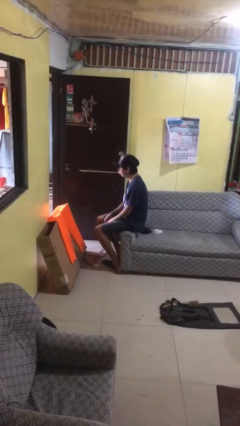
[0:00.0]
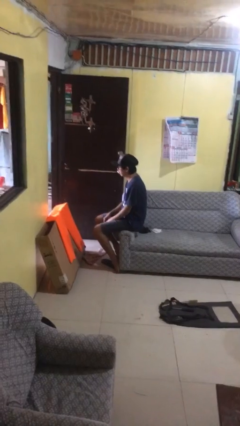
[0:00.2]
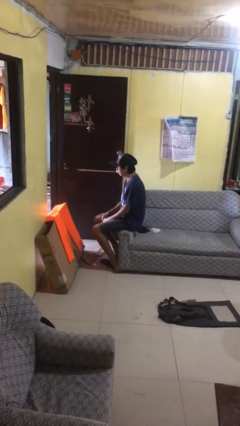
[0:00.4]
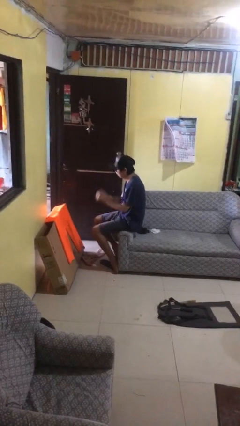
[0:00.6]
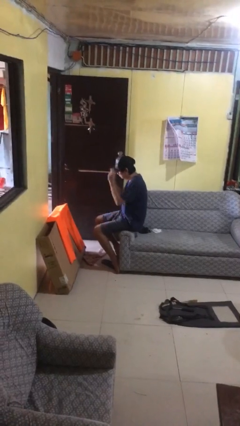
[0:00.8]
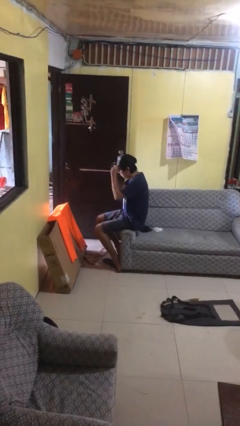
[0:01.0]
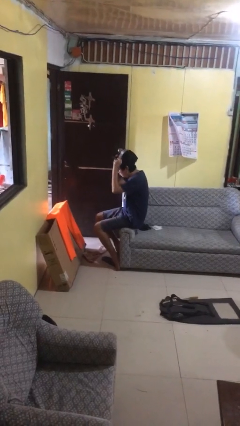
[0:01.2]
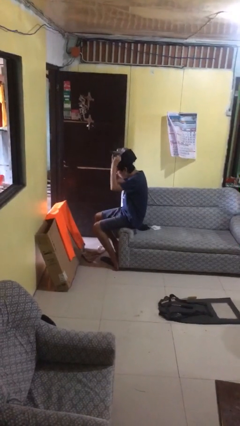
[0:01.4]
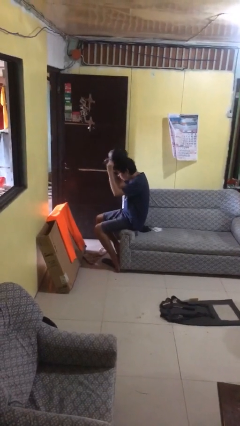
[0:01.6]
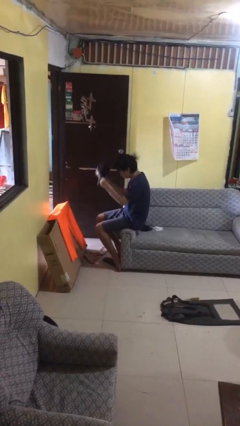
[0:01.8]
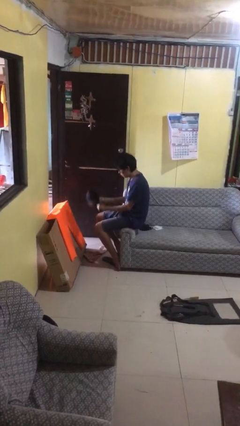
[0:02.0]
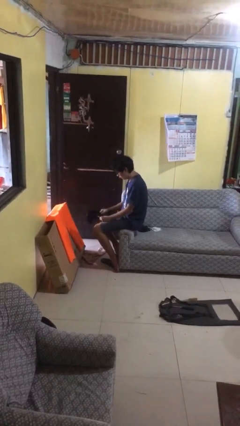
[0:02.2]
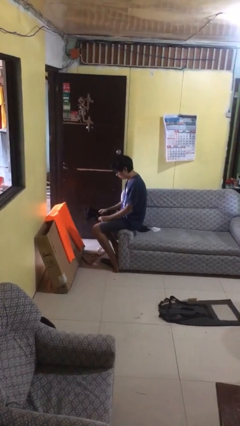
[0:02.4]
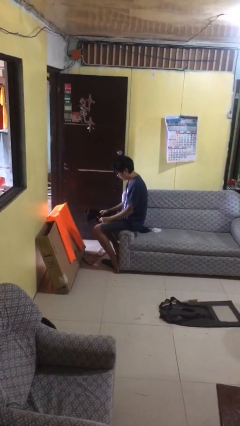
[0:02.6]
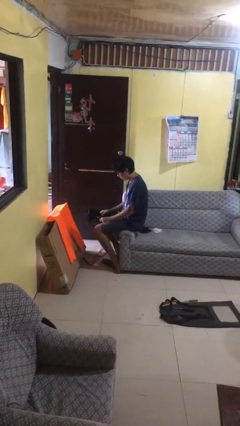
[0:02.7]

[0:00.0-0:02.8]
person takes off hat

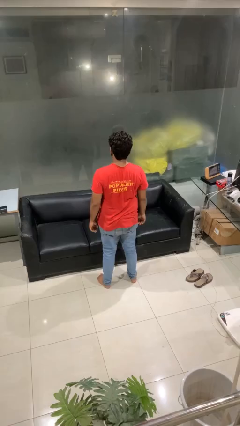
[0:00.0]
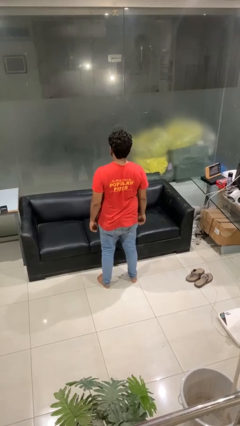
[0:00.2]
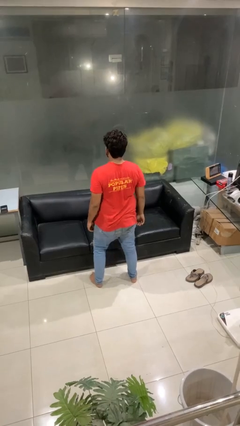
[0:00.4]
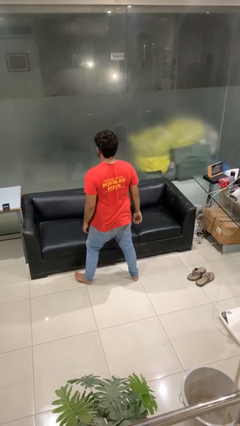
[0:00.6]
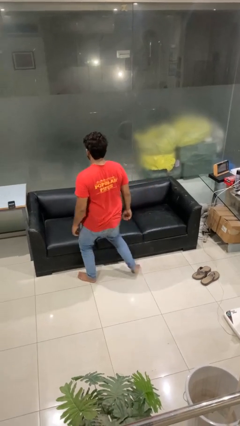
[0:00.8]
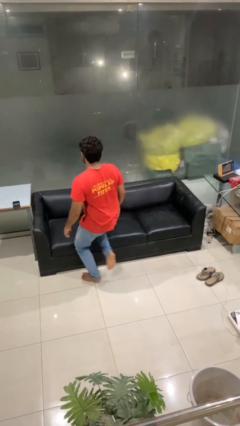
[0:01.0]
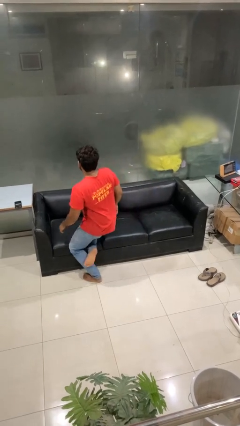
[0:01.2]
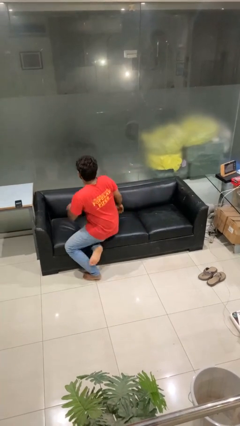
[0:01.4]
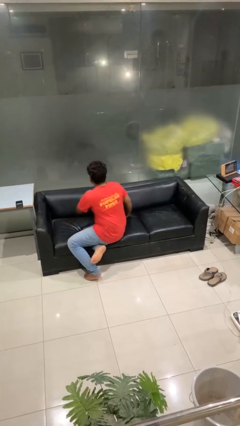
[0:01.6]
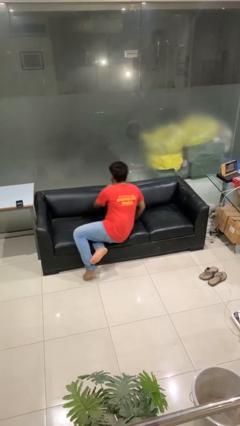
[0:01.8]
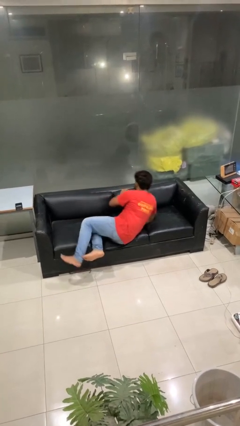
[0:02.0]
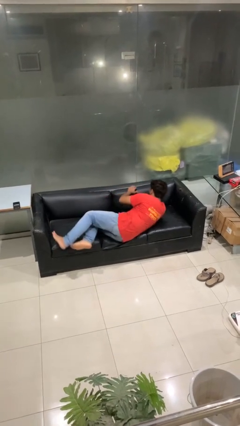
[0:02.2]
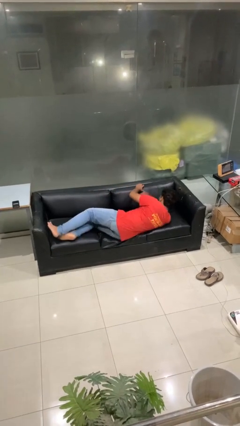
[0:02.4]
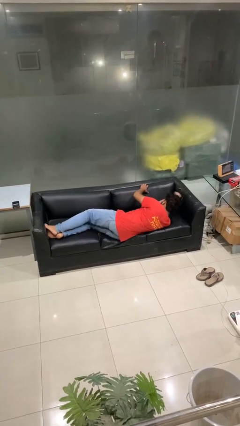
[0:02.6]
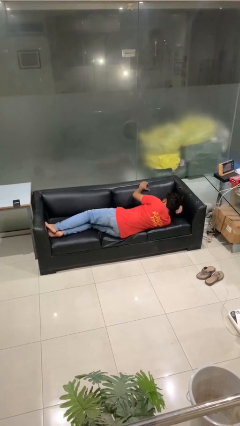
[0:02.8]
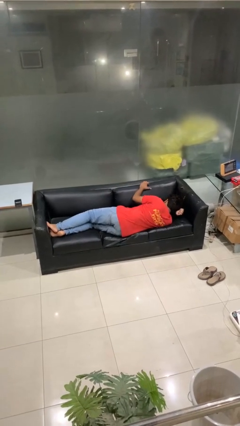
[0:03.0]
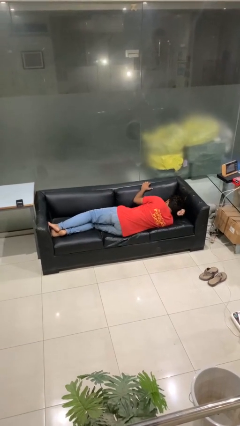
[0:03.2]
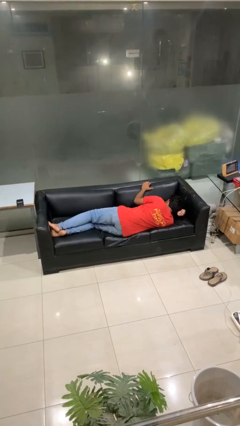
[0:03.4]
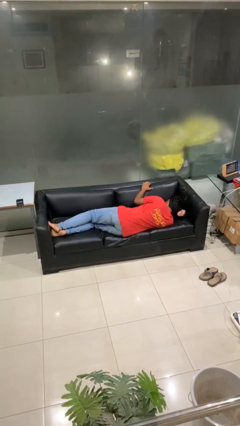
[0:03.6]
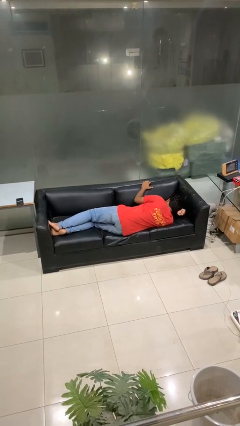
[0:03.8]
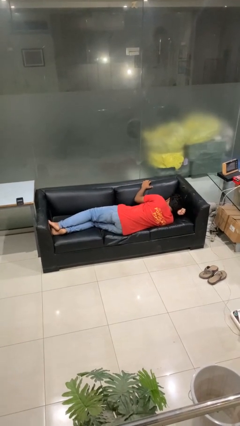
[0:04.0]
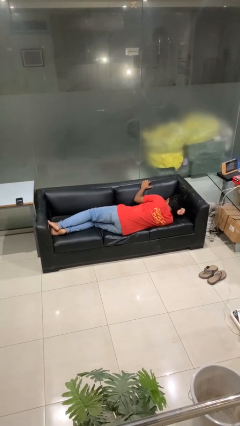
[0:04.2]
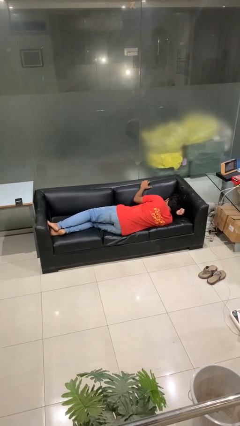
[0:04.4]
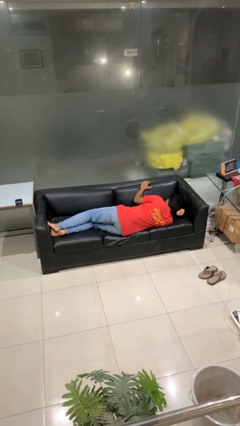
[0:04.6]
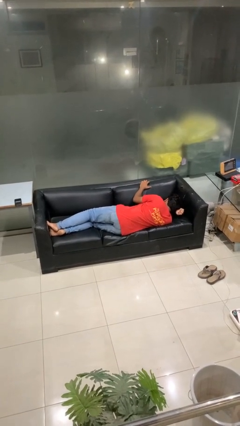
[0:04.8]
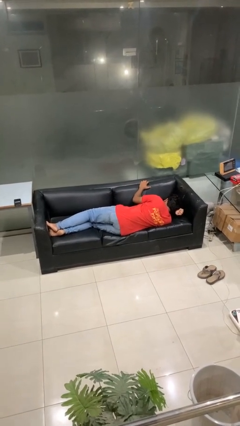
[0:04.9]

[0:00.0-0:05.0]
person lies down on couch

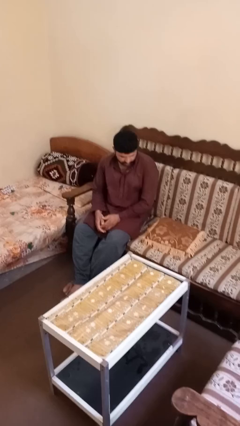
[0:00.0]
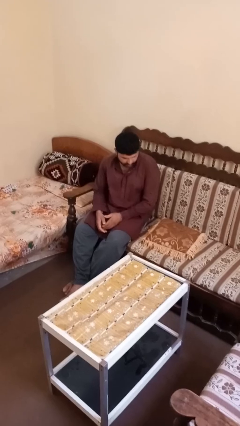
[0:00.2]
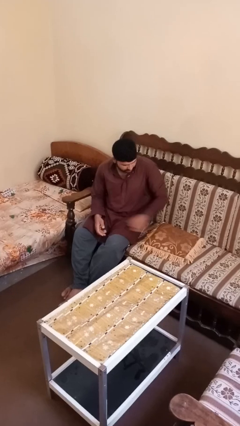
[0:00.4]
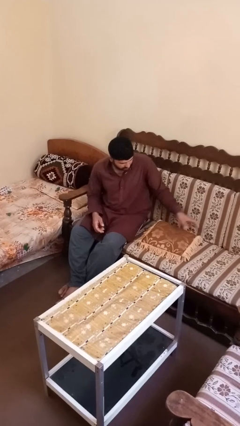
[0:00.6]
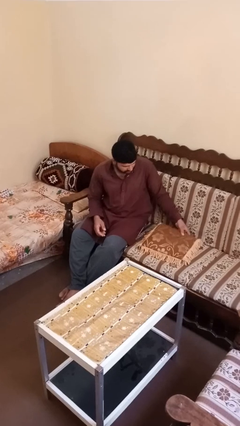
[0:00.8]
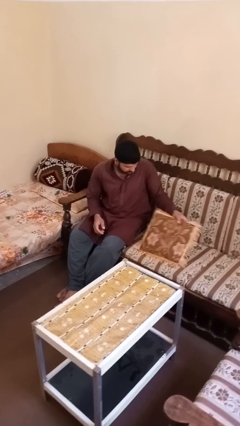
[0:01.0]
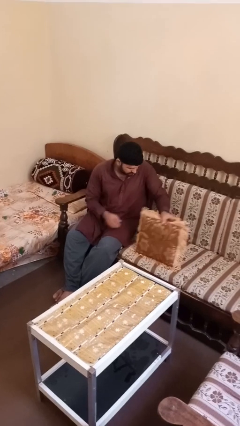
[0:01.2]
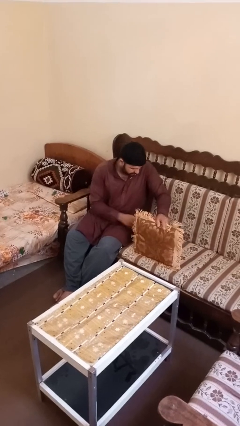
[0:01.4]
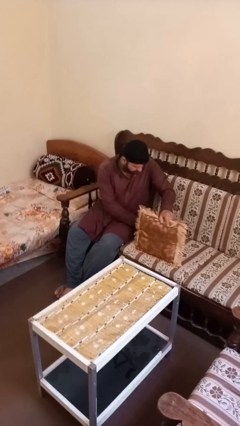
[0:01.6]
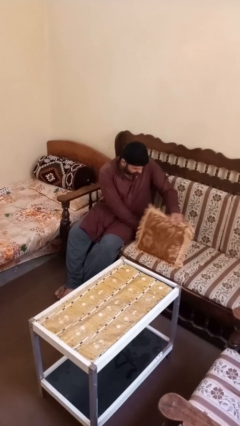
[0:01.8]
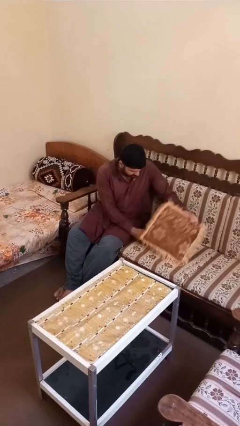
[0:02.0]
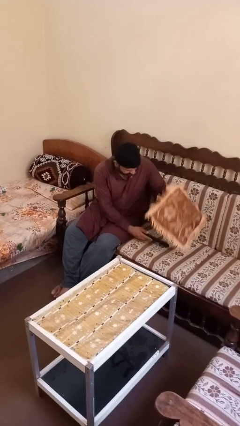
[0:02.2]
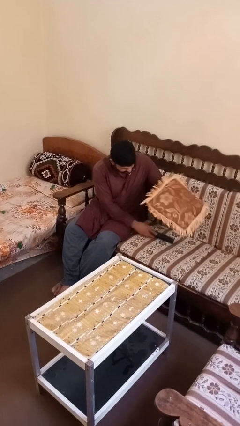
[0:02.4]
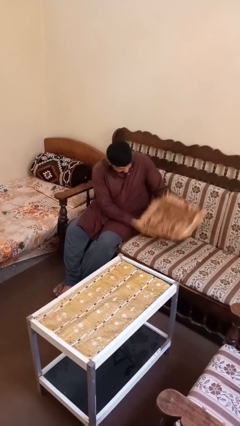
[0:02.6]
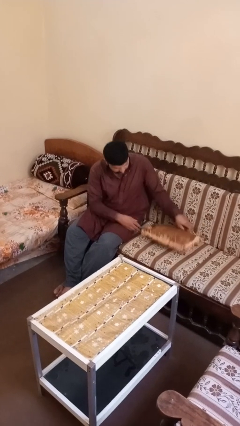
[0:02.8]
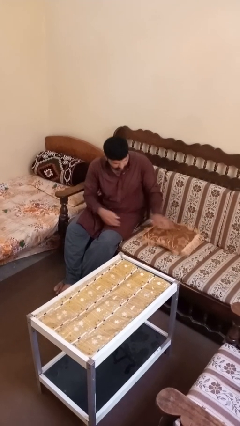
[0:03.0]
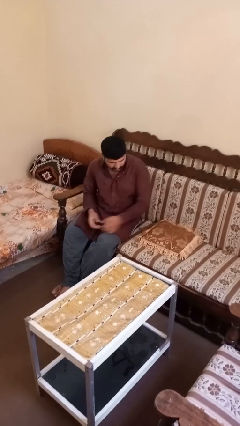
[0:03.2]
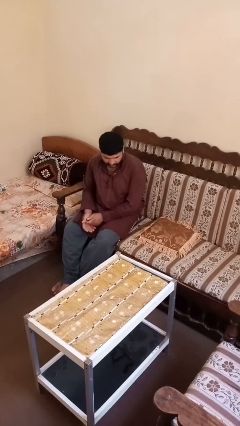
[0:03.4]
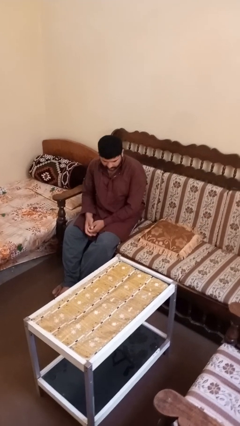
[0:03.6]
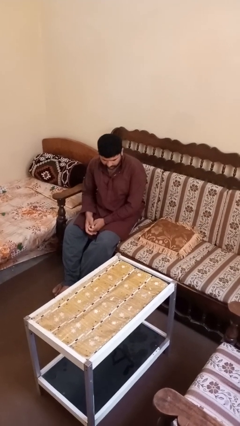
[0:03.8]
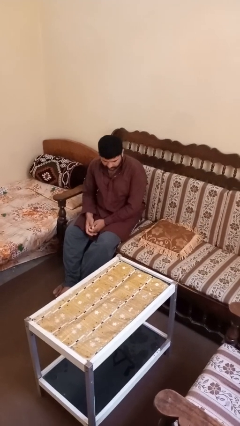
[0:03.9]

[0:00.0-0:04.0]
person searches in couch

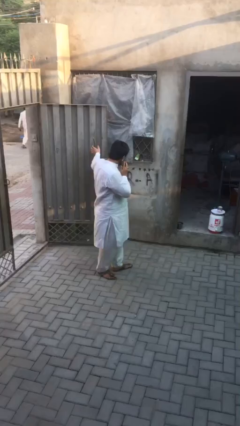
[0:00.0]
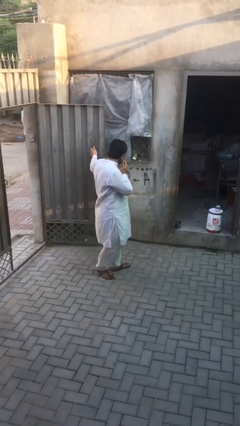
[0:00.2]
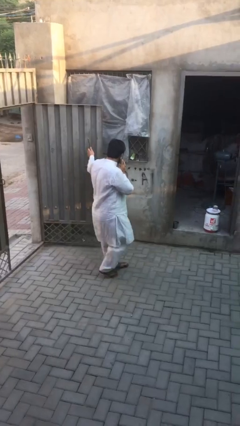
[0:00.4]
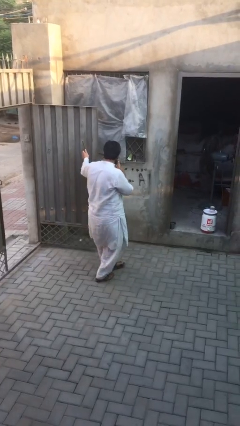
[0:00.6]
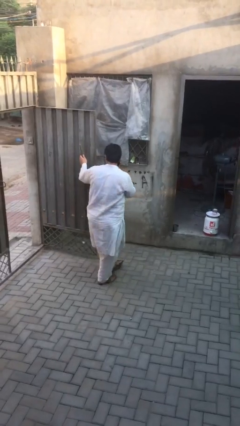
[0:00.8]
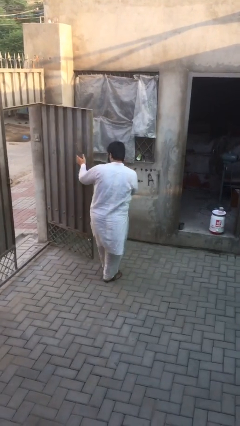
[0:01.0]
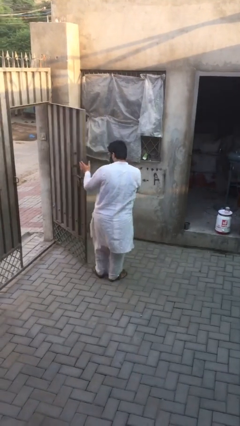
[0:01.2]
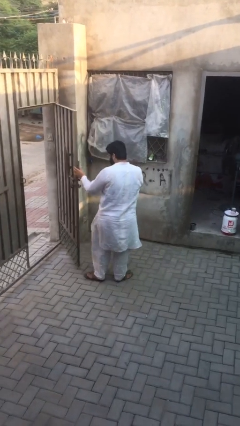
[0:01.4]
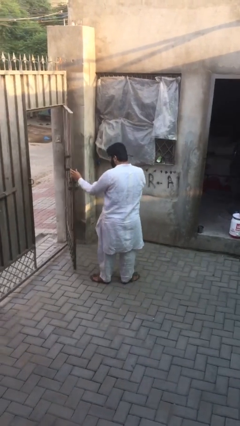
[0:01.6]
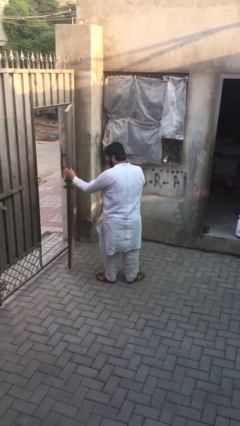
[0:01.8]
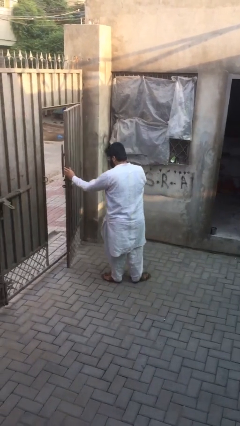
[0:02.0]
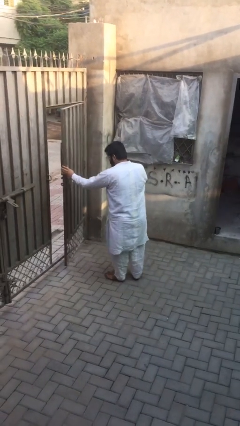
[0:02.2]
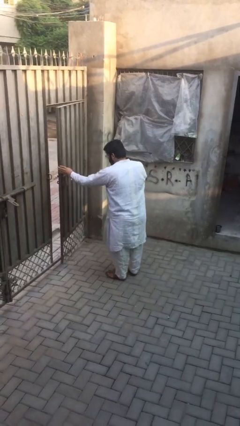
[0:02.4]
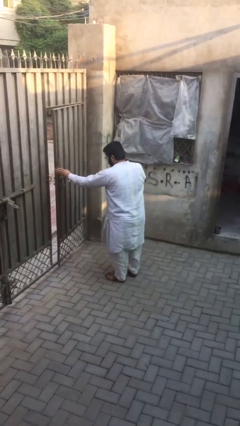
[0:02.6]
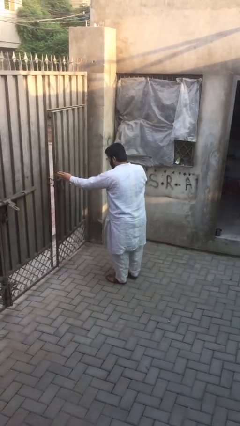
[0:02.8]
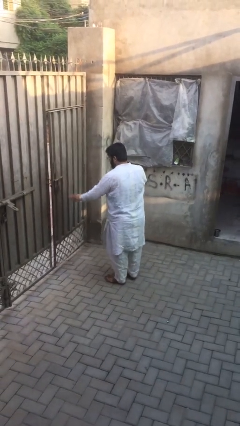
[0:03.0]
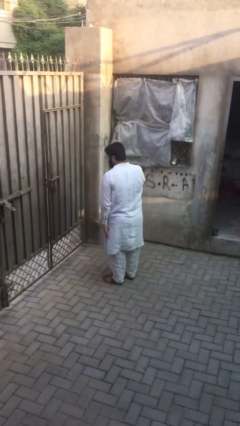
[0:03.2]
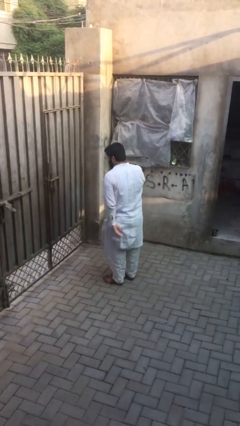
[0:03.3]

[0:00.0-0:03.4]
person closes facility door

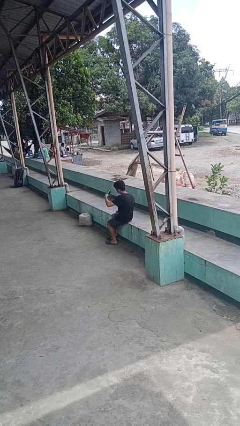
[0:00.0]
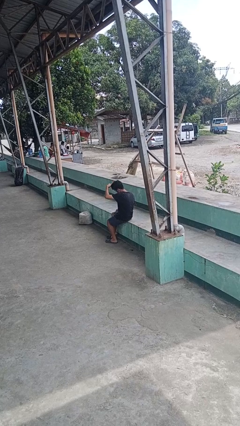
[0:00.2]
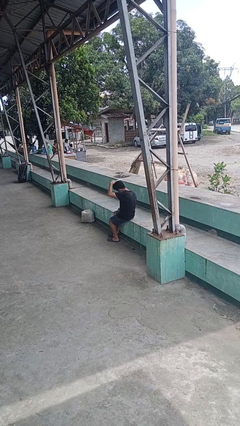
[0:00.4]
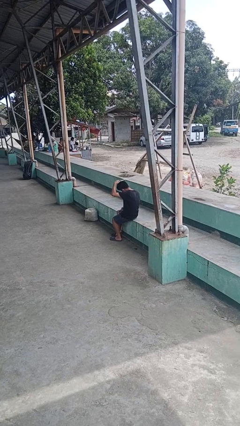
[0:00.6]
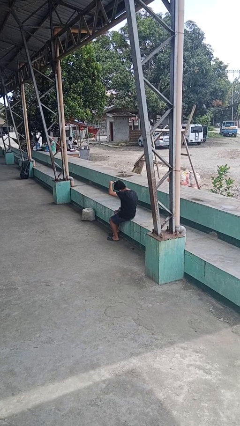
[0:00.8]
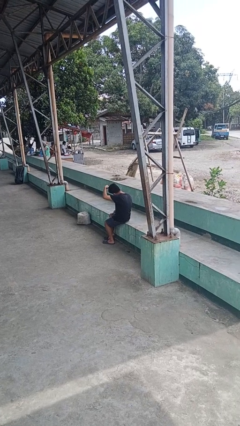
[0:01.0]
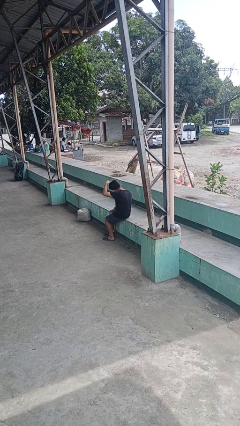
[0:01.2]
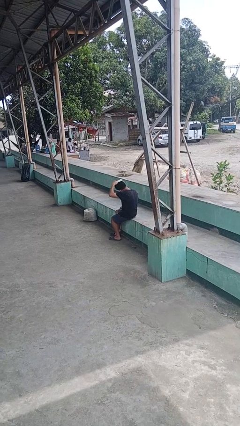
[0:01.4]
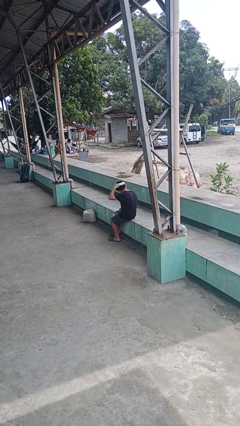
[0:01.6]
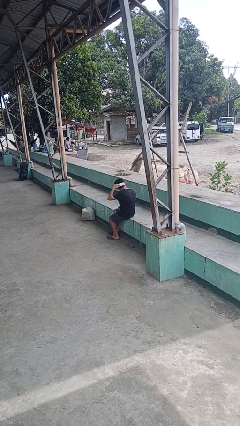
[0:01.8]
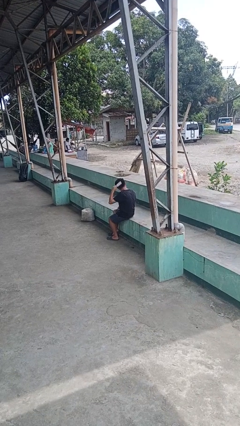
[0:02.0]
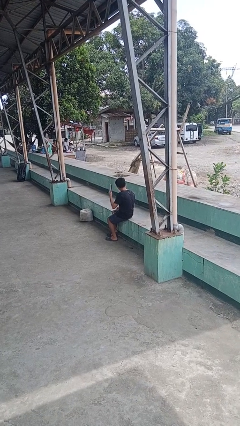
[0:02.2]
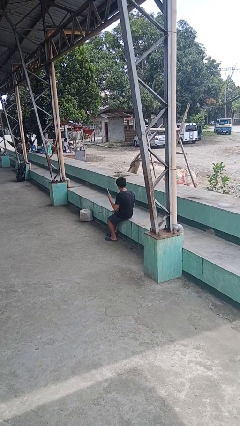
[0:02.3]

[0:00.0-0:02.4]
person brushes hair
